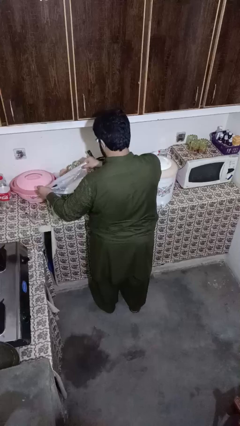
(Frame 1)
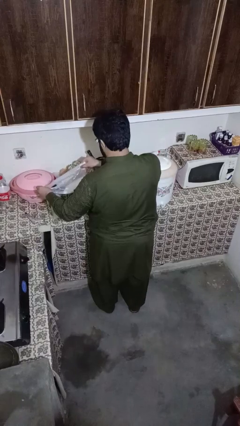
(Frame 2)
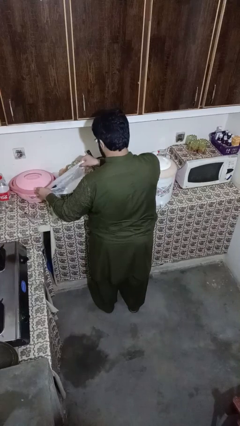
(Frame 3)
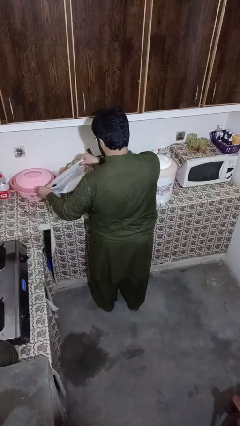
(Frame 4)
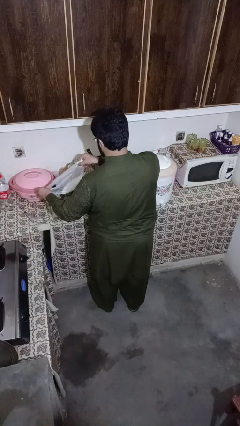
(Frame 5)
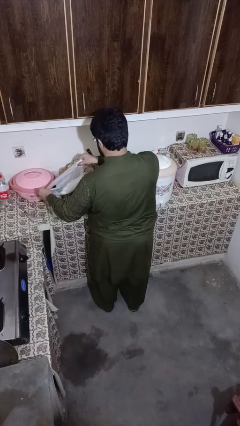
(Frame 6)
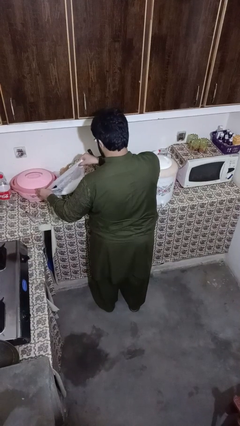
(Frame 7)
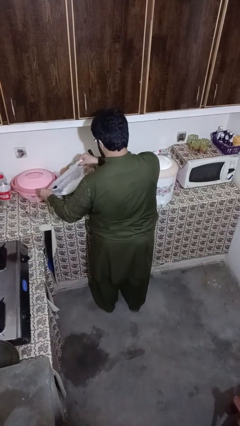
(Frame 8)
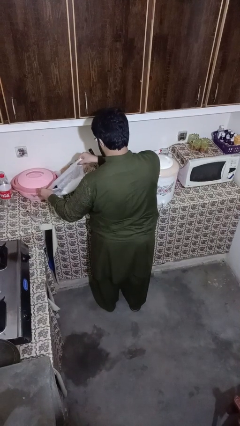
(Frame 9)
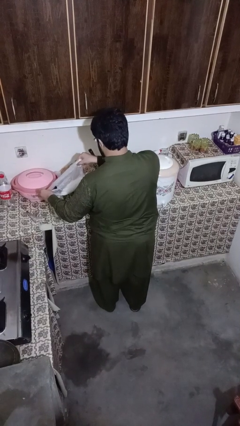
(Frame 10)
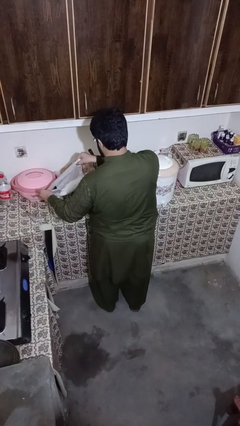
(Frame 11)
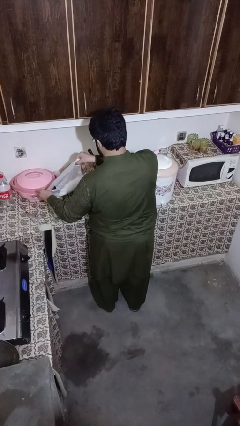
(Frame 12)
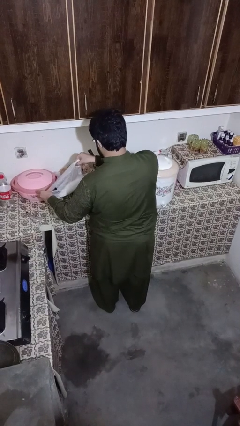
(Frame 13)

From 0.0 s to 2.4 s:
person pours into bowl

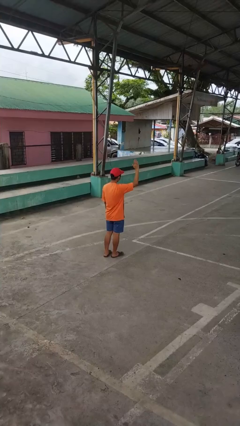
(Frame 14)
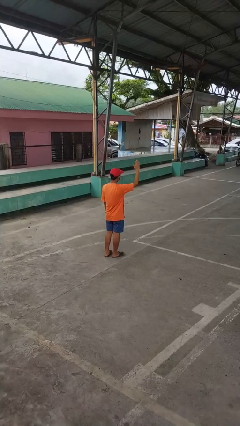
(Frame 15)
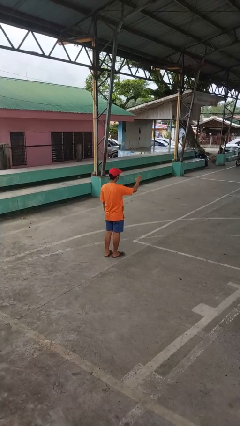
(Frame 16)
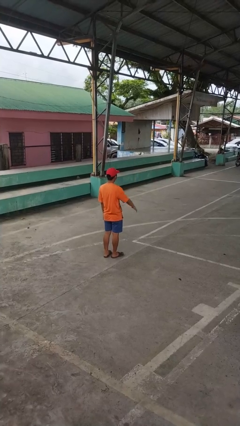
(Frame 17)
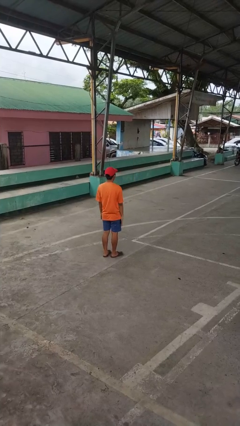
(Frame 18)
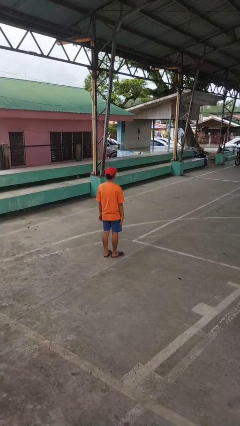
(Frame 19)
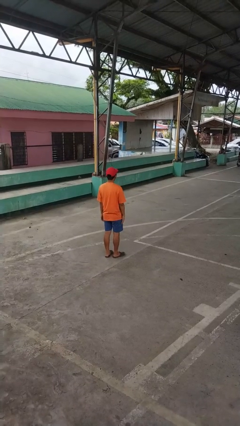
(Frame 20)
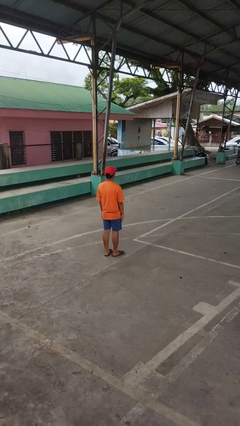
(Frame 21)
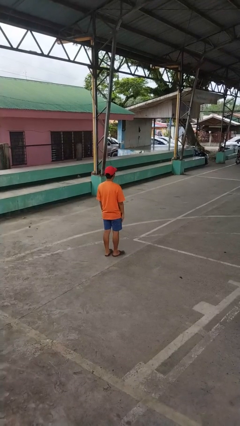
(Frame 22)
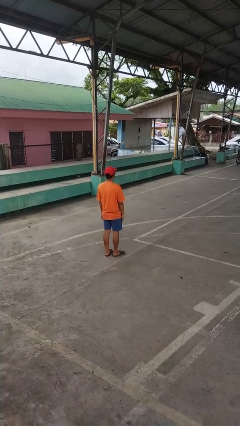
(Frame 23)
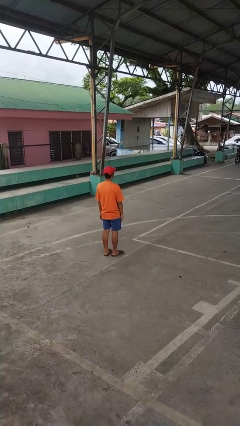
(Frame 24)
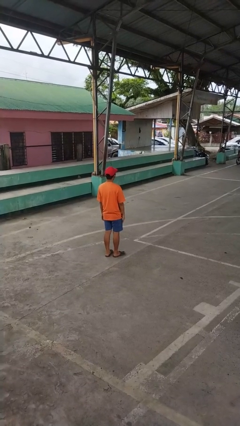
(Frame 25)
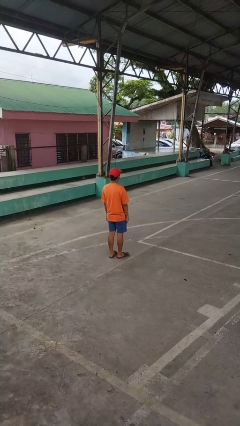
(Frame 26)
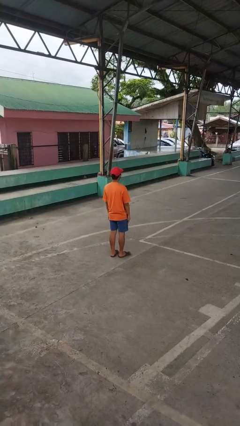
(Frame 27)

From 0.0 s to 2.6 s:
person gestures lower hand

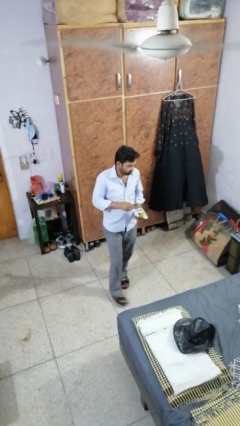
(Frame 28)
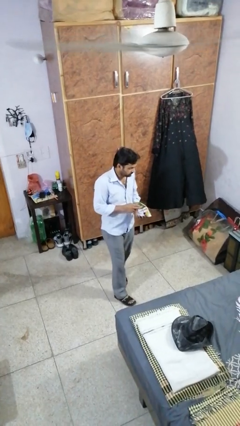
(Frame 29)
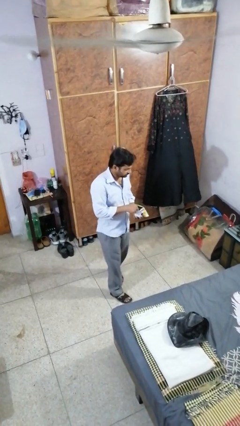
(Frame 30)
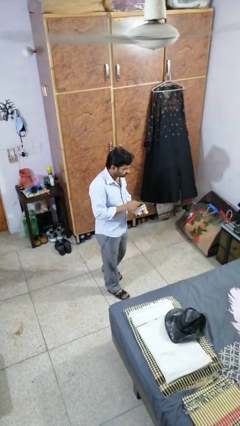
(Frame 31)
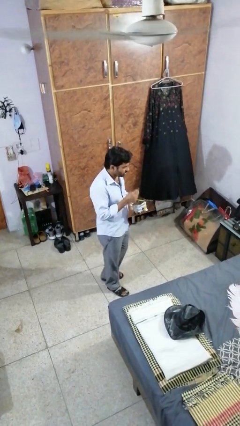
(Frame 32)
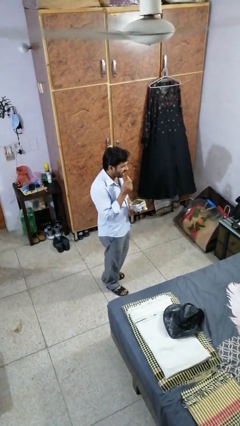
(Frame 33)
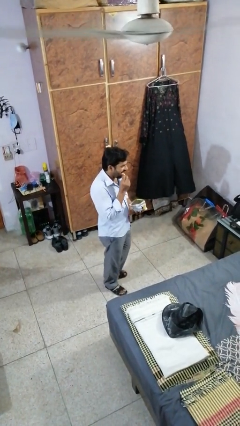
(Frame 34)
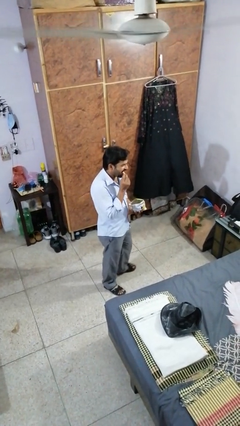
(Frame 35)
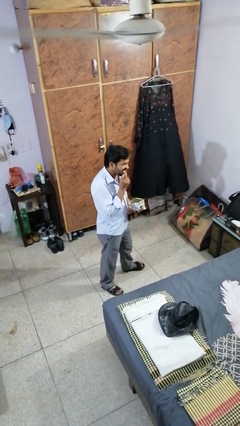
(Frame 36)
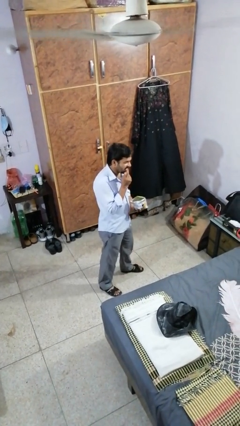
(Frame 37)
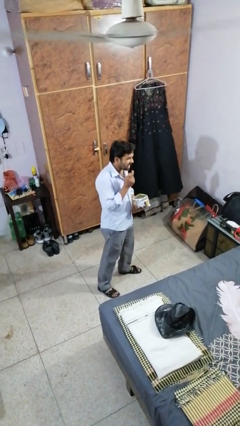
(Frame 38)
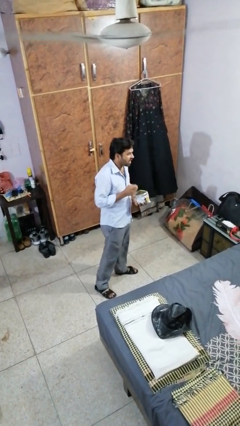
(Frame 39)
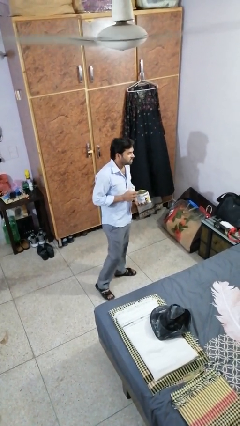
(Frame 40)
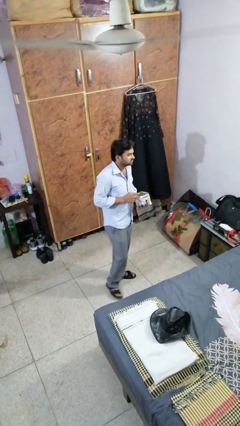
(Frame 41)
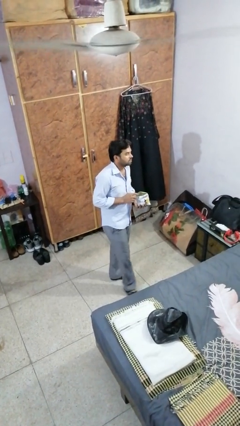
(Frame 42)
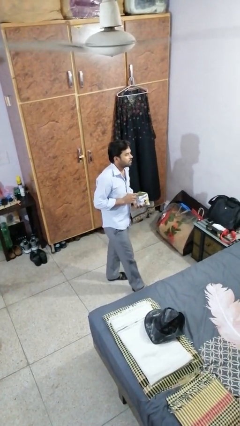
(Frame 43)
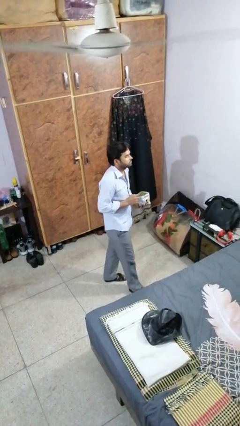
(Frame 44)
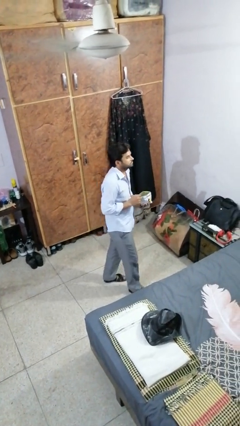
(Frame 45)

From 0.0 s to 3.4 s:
person eats snack from bag

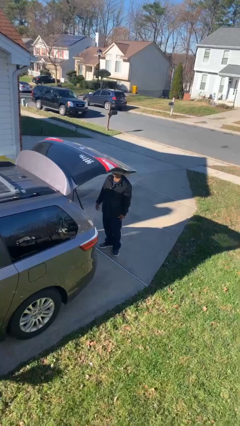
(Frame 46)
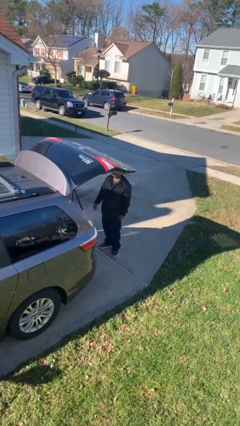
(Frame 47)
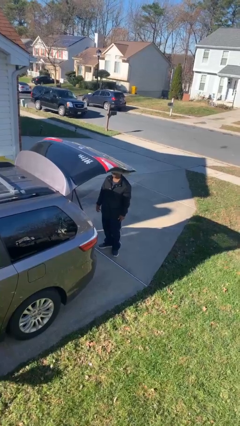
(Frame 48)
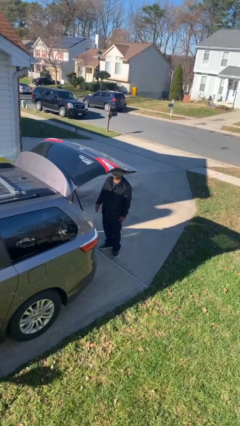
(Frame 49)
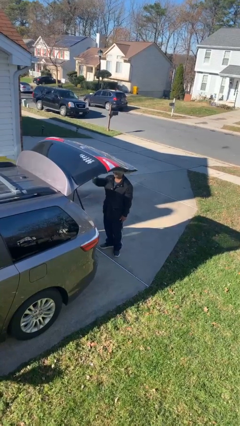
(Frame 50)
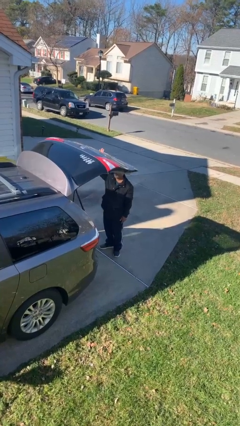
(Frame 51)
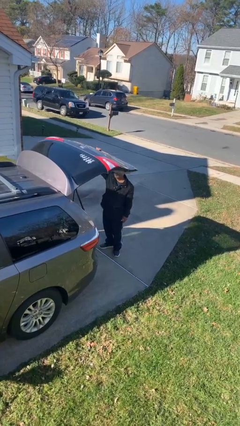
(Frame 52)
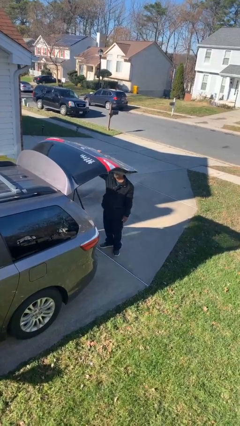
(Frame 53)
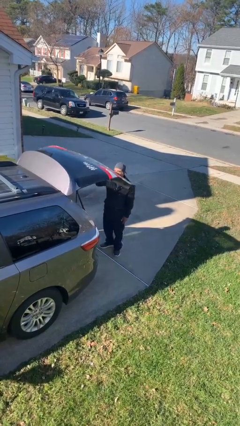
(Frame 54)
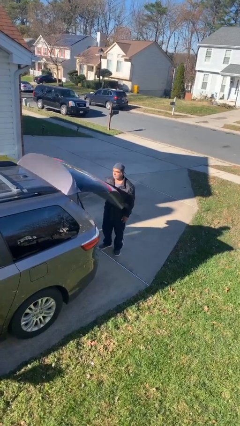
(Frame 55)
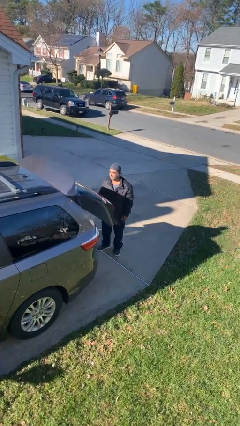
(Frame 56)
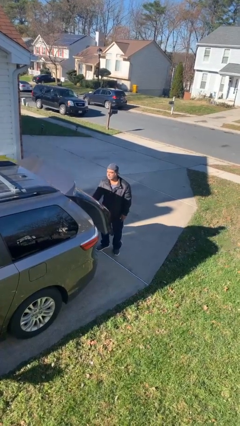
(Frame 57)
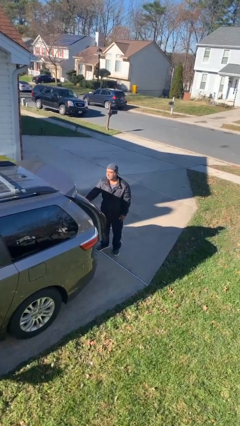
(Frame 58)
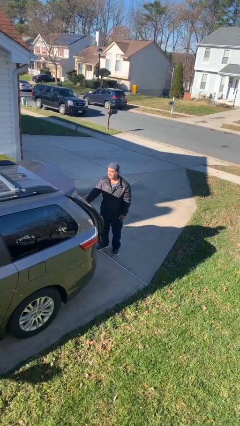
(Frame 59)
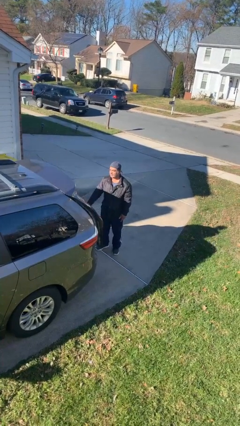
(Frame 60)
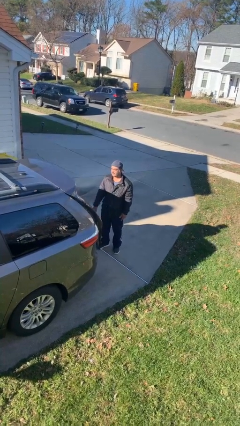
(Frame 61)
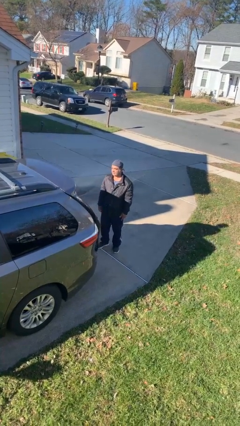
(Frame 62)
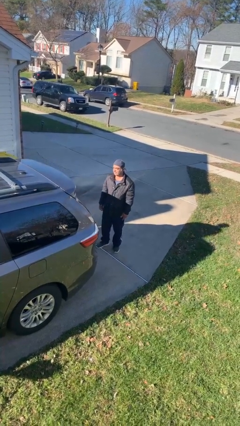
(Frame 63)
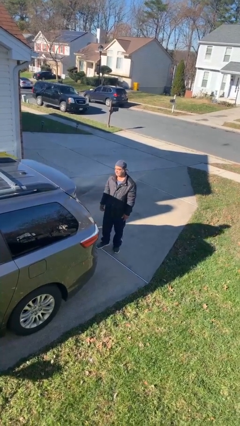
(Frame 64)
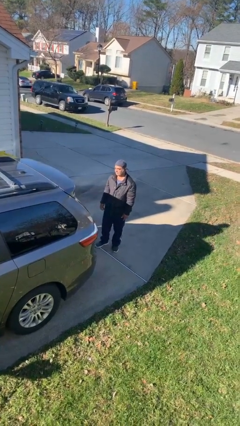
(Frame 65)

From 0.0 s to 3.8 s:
person closes car trunk

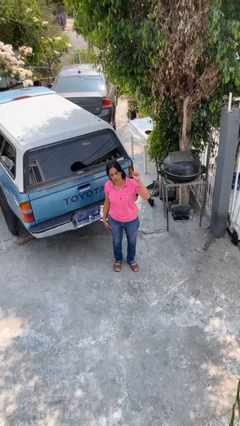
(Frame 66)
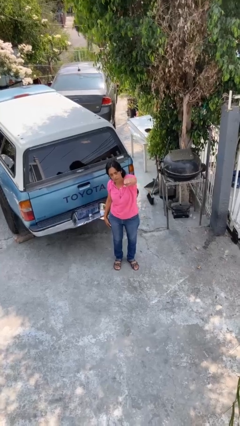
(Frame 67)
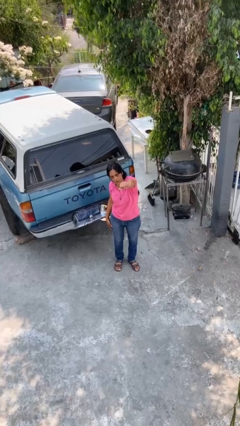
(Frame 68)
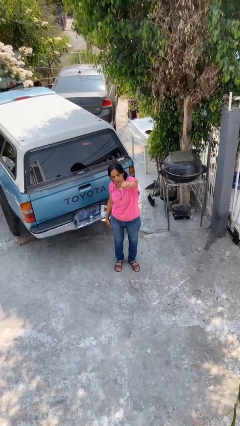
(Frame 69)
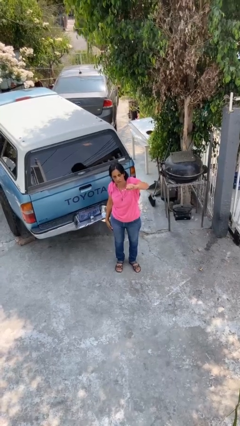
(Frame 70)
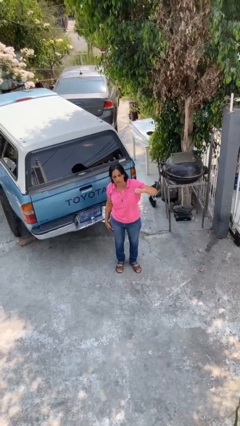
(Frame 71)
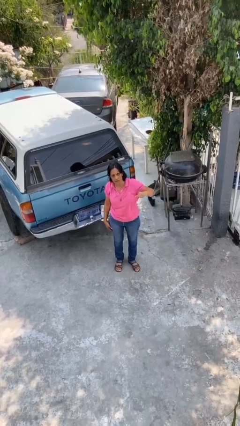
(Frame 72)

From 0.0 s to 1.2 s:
person punches

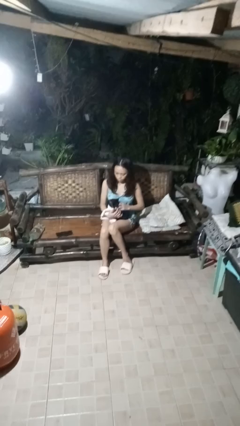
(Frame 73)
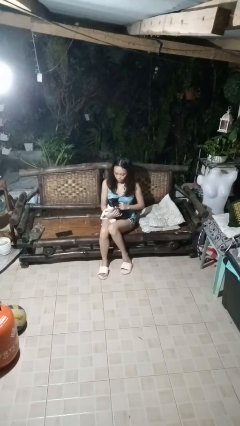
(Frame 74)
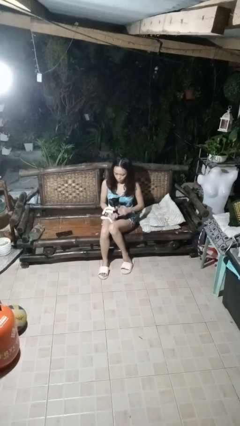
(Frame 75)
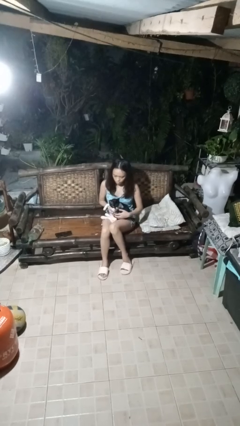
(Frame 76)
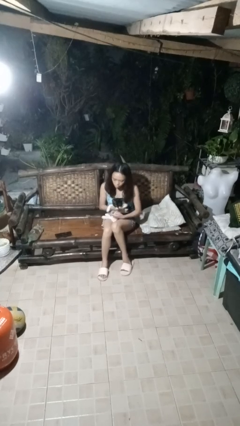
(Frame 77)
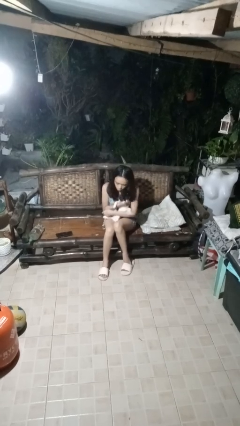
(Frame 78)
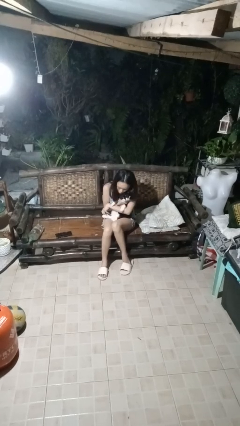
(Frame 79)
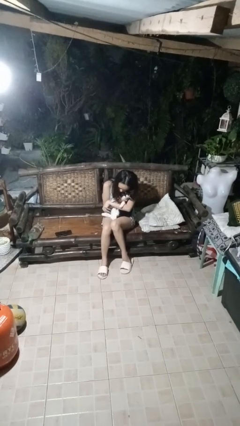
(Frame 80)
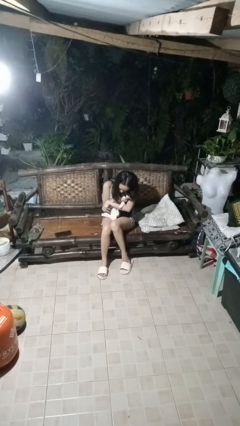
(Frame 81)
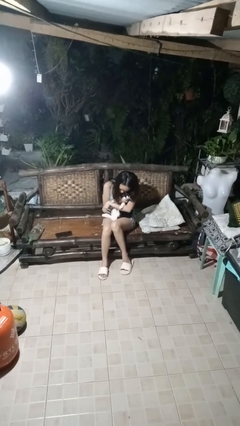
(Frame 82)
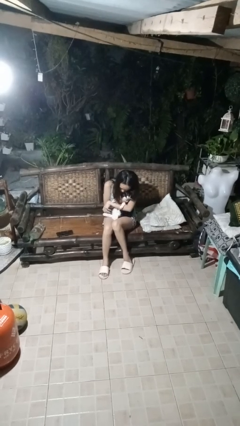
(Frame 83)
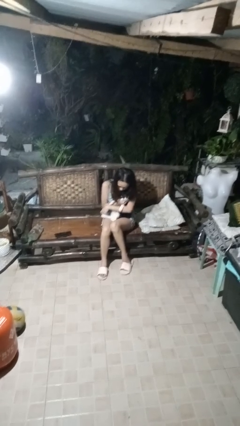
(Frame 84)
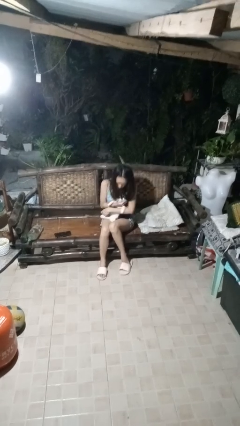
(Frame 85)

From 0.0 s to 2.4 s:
person hugs cat

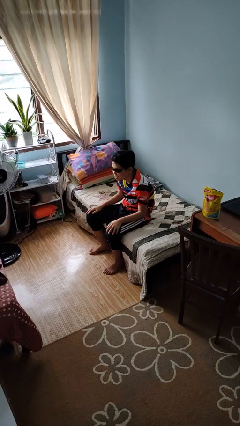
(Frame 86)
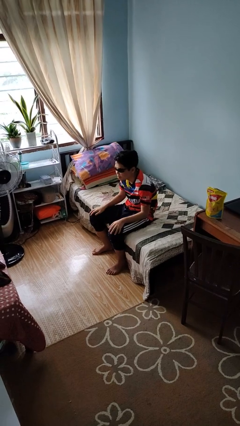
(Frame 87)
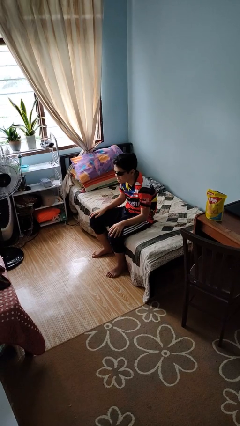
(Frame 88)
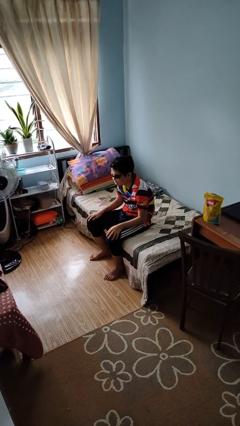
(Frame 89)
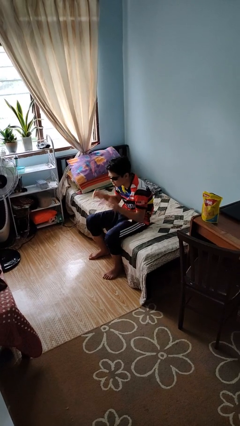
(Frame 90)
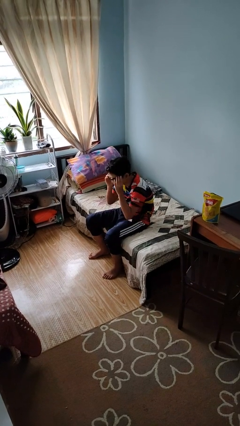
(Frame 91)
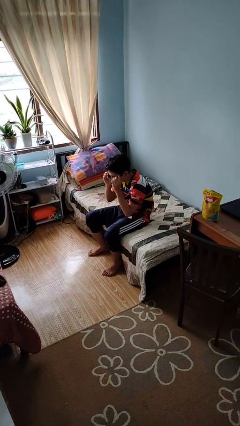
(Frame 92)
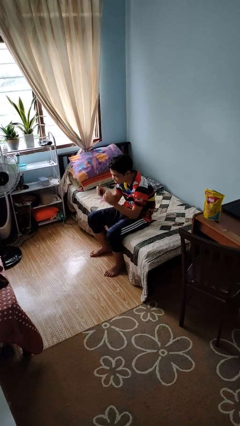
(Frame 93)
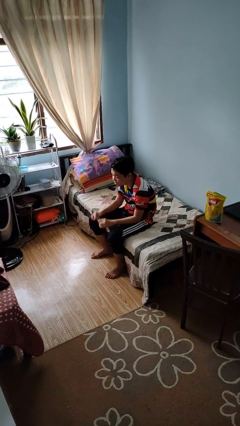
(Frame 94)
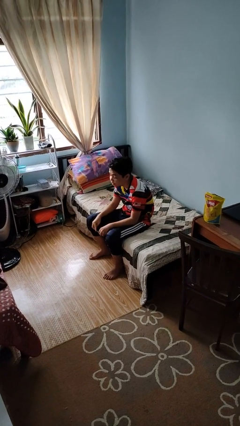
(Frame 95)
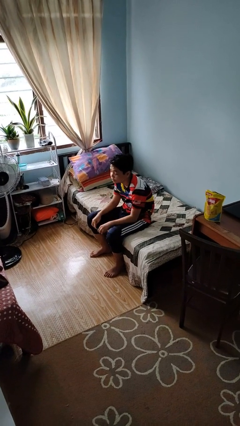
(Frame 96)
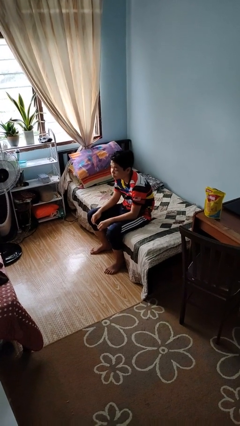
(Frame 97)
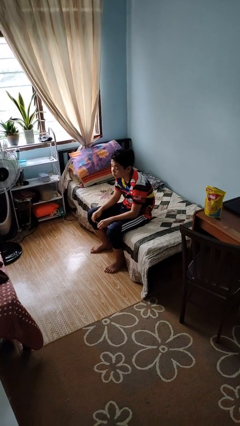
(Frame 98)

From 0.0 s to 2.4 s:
person takes off glasses
